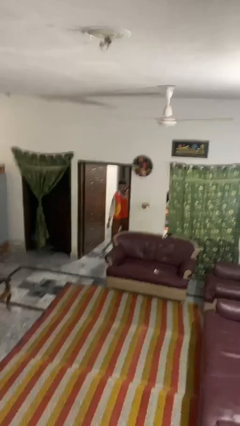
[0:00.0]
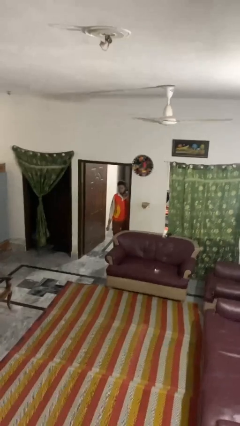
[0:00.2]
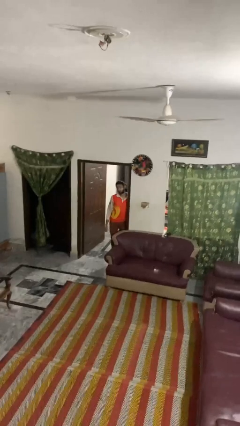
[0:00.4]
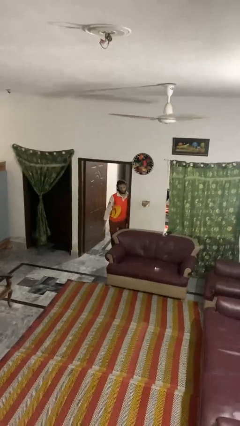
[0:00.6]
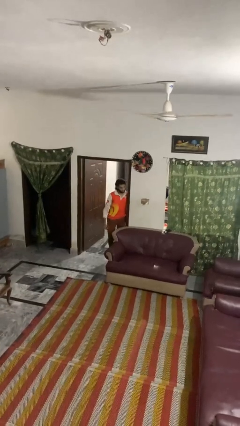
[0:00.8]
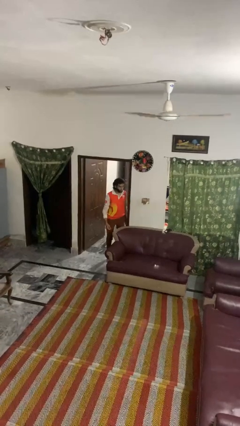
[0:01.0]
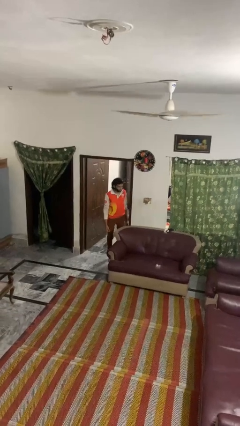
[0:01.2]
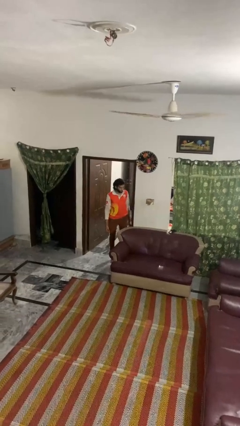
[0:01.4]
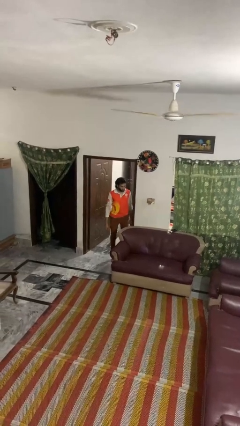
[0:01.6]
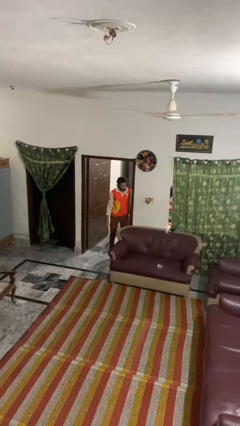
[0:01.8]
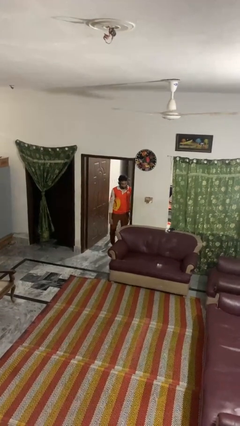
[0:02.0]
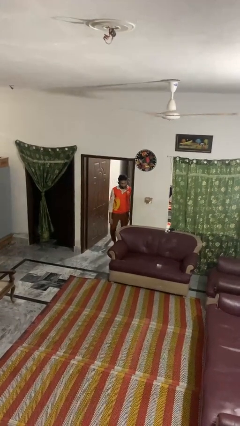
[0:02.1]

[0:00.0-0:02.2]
person bumps into wall

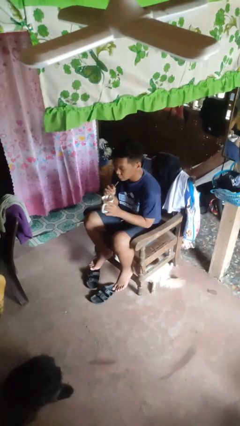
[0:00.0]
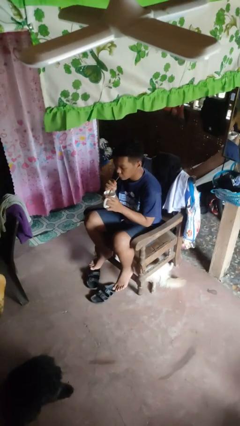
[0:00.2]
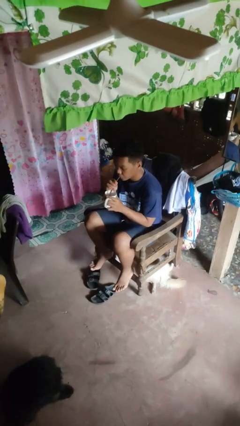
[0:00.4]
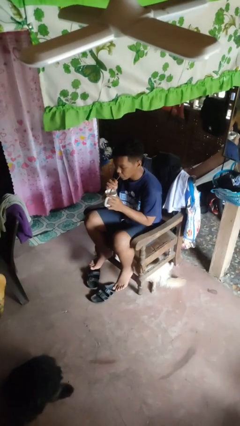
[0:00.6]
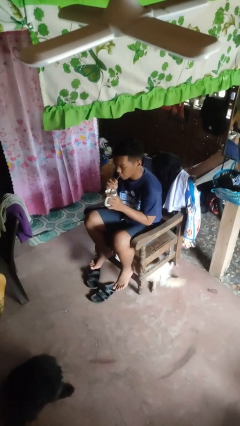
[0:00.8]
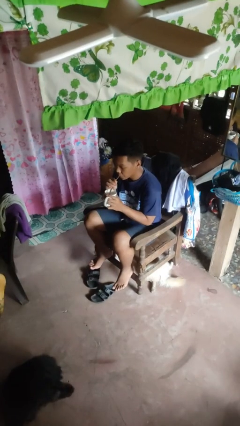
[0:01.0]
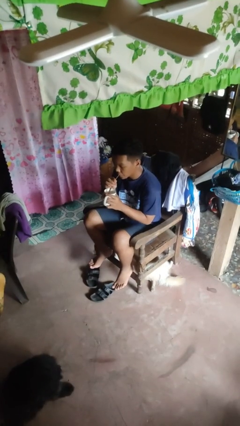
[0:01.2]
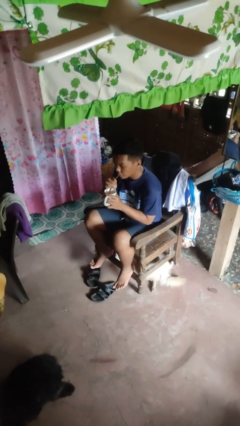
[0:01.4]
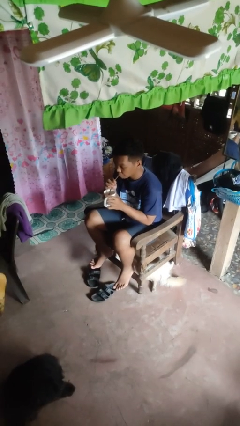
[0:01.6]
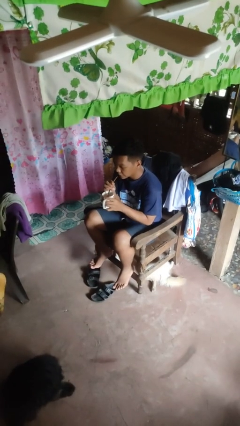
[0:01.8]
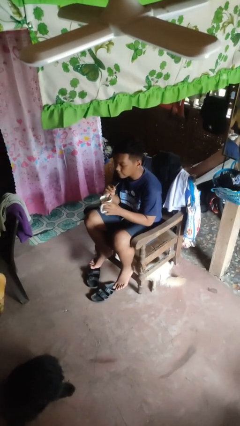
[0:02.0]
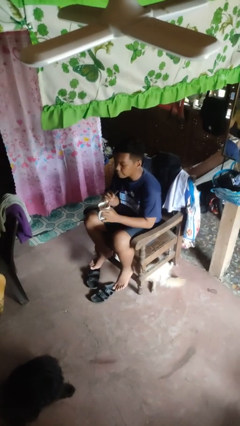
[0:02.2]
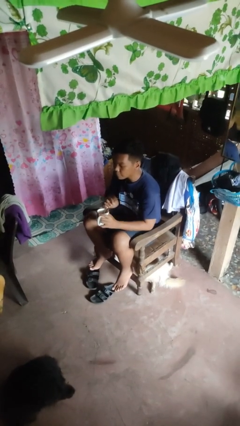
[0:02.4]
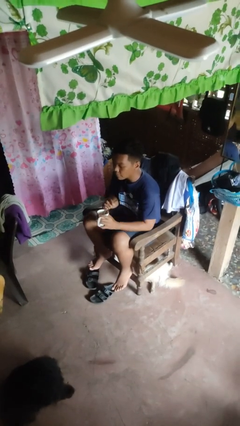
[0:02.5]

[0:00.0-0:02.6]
person drinks from straw

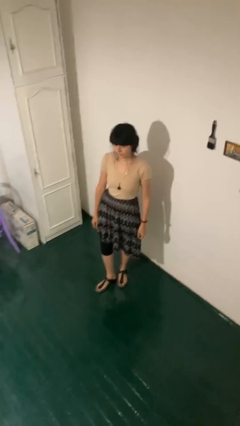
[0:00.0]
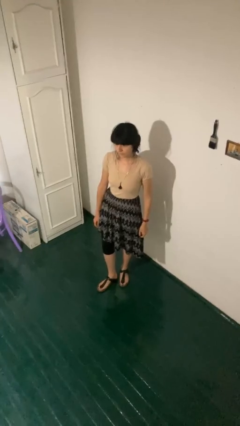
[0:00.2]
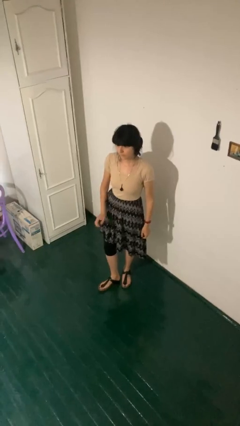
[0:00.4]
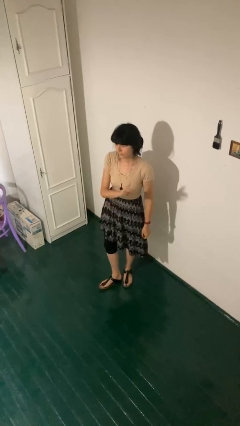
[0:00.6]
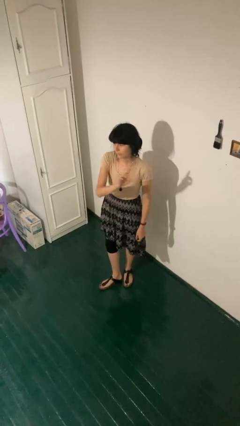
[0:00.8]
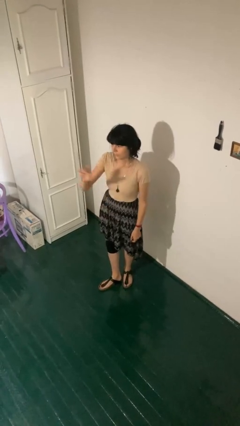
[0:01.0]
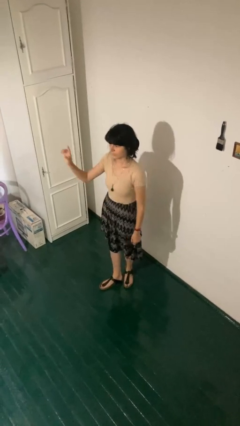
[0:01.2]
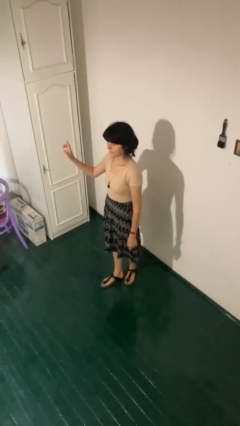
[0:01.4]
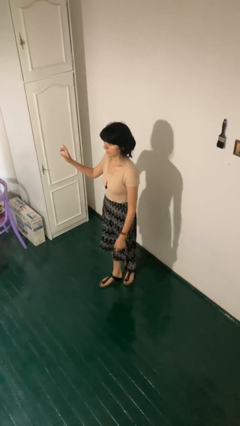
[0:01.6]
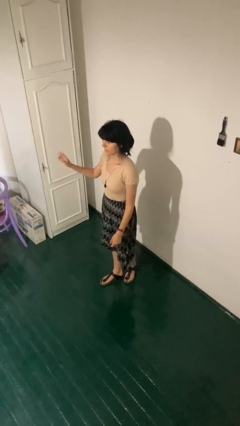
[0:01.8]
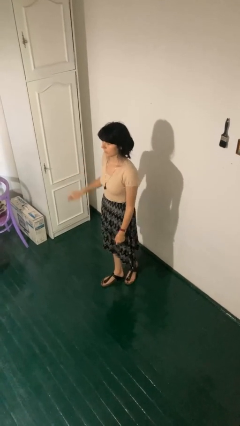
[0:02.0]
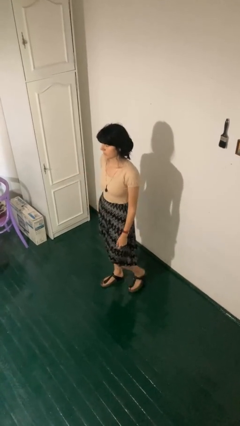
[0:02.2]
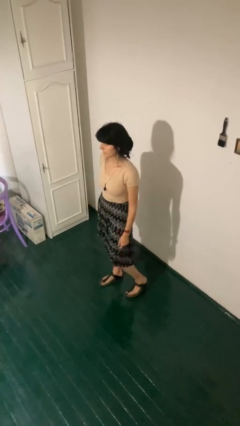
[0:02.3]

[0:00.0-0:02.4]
person gestures swipe right

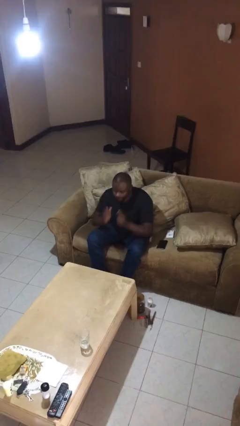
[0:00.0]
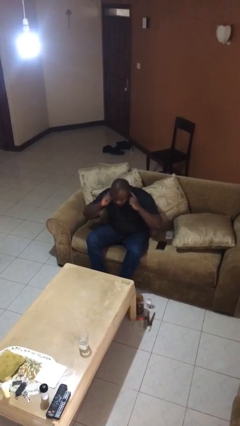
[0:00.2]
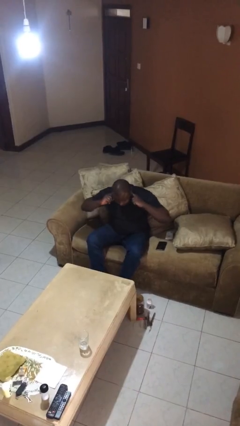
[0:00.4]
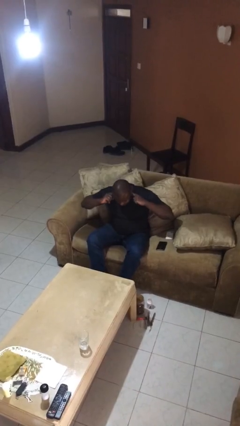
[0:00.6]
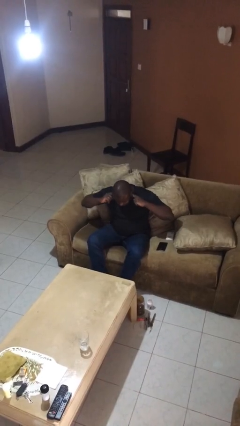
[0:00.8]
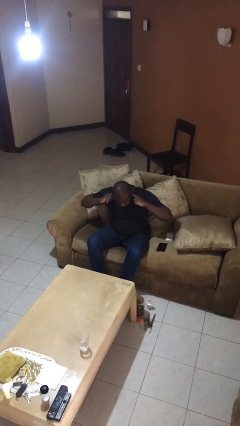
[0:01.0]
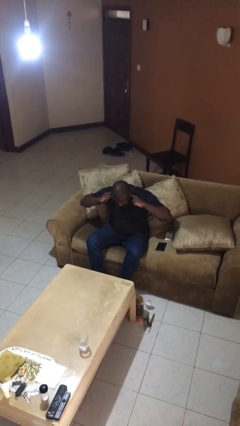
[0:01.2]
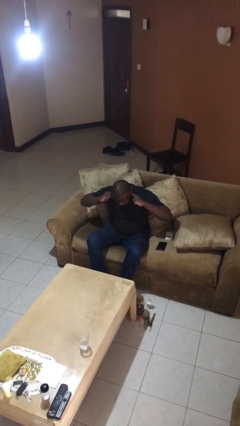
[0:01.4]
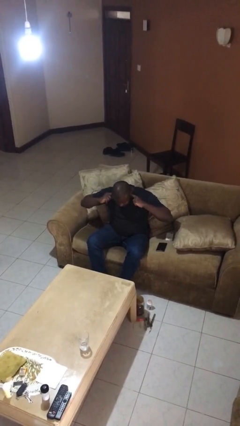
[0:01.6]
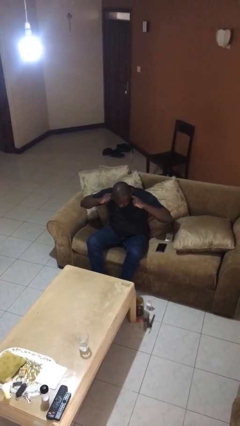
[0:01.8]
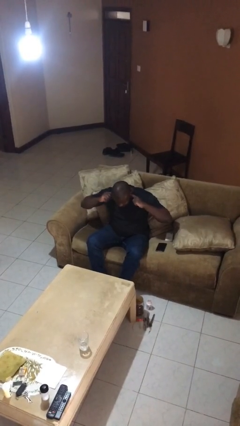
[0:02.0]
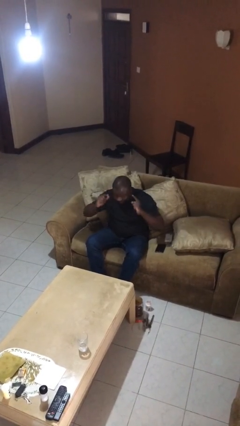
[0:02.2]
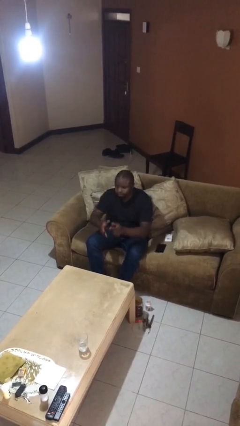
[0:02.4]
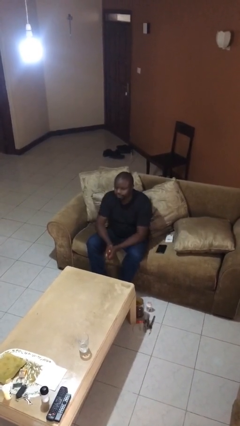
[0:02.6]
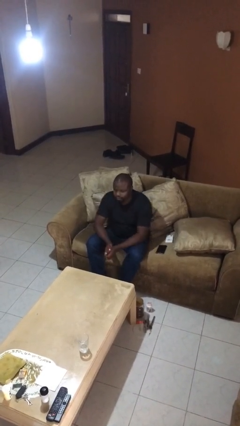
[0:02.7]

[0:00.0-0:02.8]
person puts fingers in ear

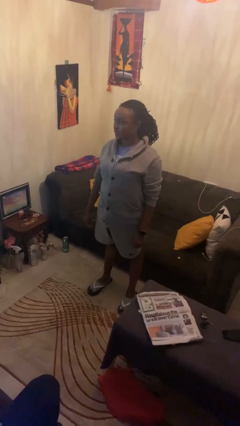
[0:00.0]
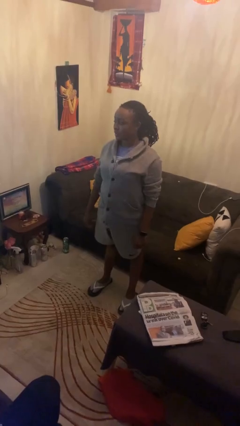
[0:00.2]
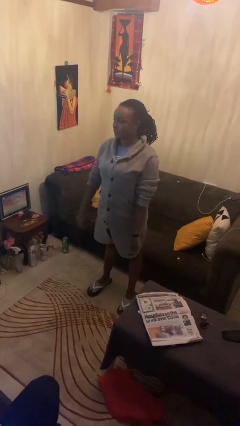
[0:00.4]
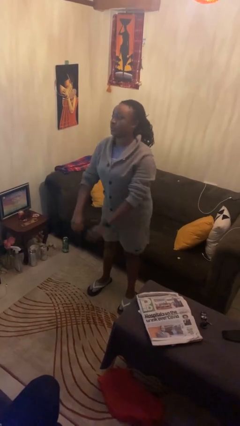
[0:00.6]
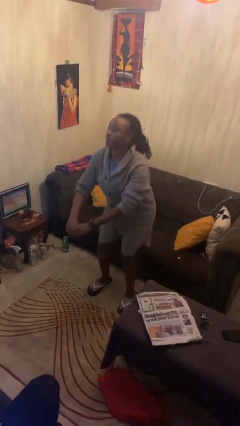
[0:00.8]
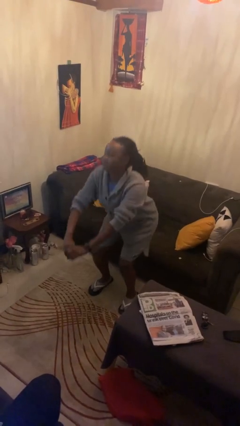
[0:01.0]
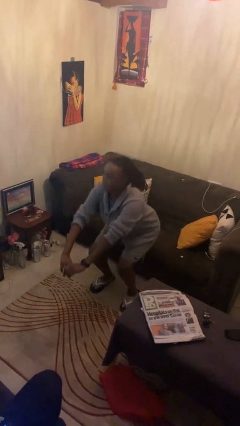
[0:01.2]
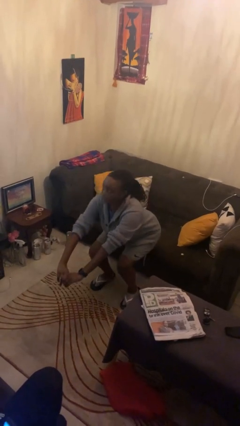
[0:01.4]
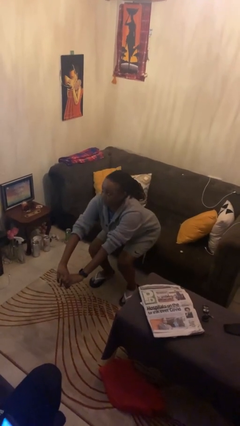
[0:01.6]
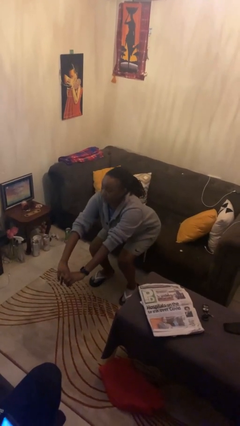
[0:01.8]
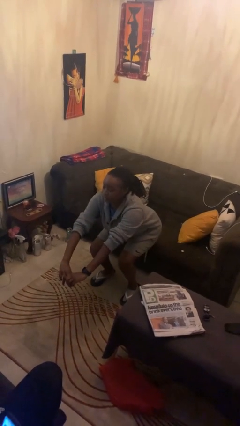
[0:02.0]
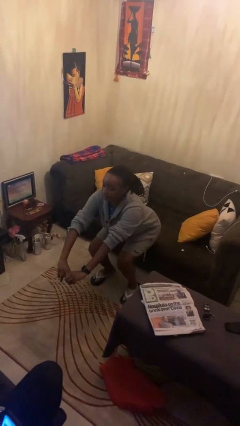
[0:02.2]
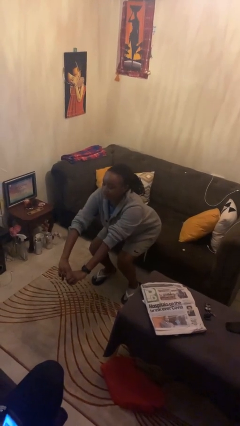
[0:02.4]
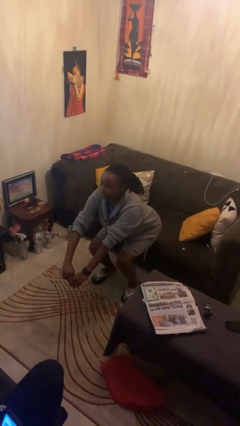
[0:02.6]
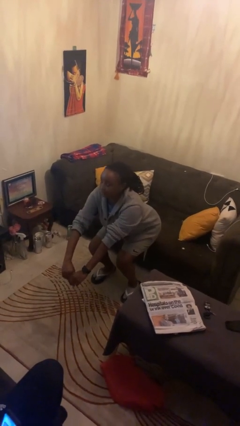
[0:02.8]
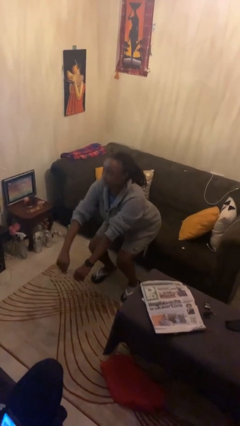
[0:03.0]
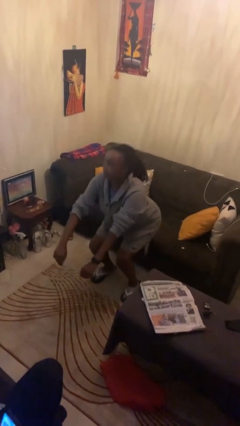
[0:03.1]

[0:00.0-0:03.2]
person squats

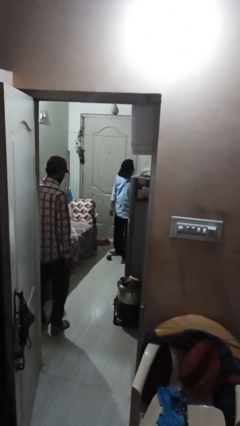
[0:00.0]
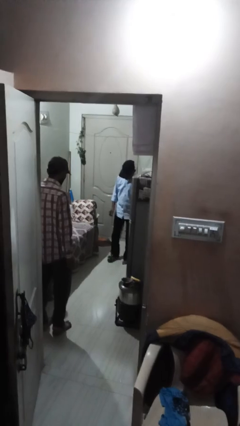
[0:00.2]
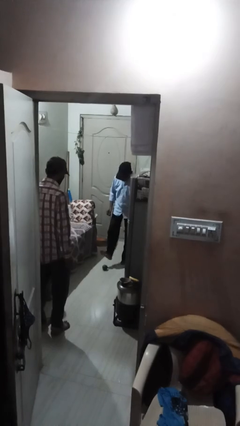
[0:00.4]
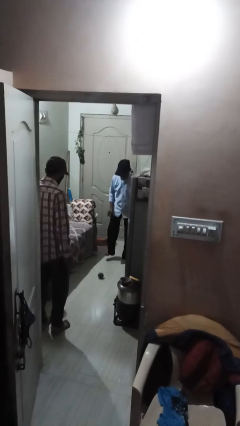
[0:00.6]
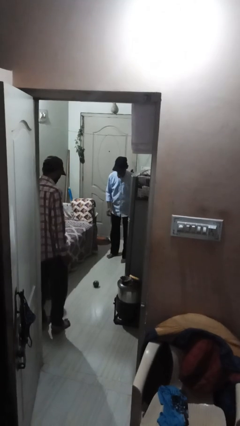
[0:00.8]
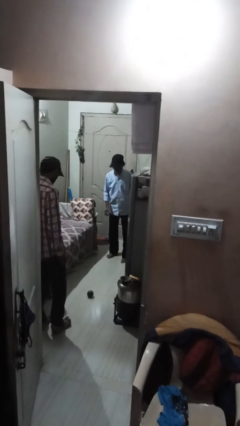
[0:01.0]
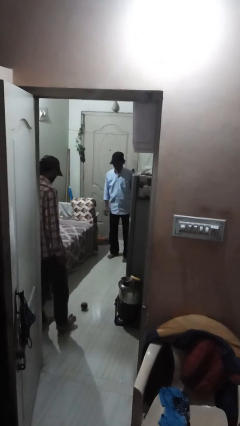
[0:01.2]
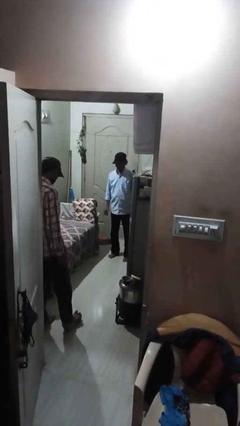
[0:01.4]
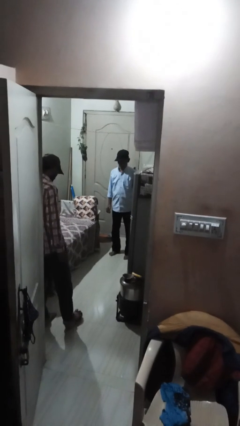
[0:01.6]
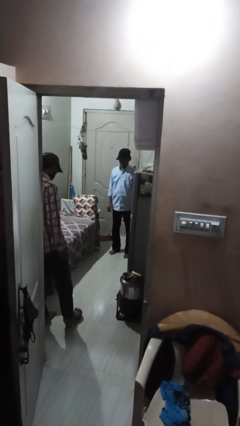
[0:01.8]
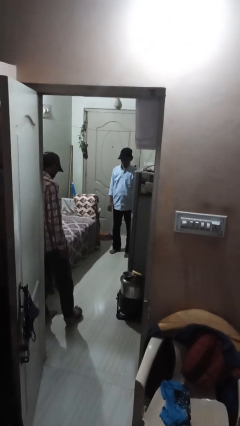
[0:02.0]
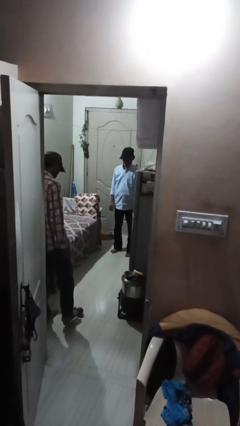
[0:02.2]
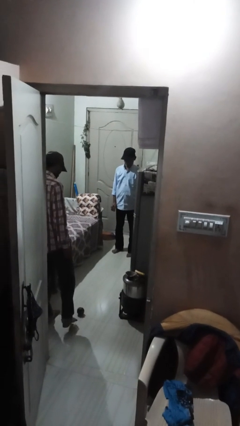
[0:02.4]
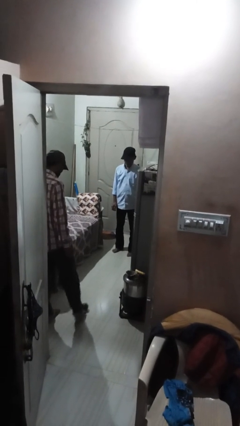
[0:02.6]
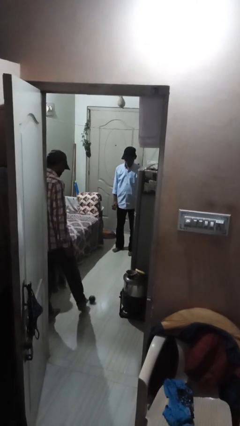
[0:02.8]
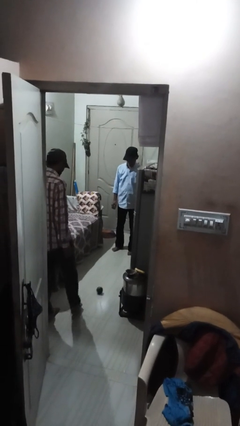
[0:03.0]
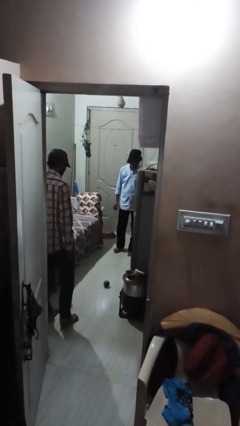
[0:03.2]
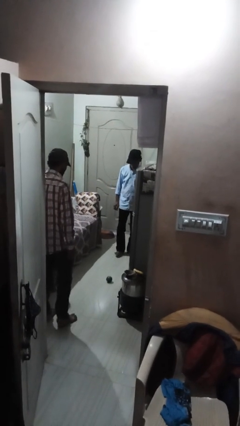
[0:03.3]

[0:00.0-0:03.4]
person kicks object to person

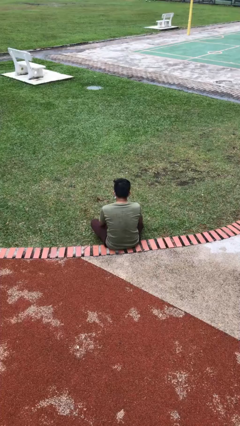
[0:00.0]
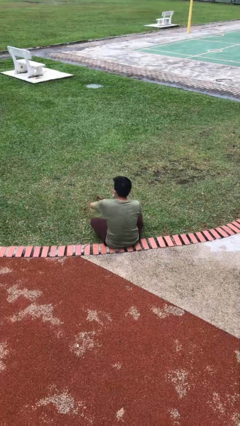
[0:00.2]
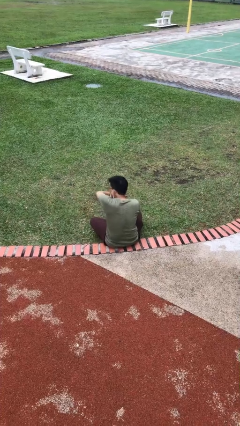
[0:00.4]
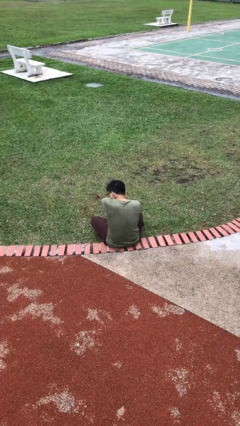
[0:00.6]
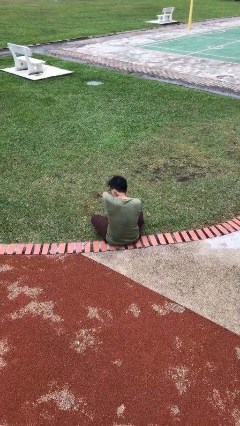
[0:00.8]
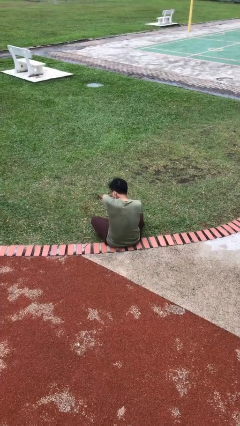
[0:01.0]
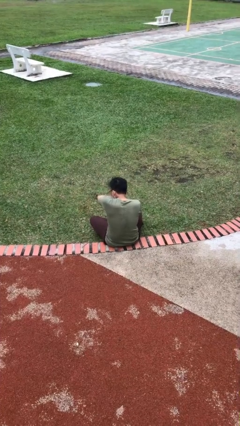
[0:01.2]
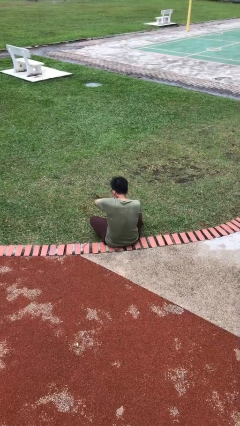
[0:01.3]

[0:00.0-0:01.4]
person sneezes into arm
